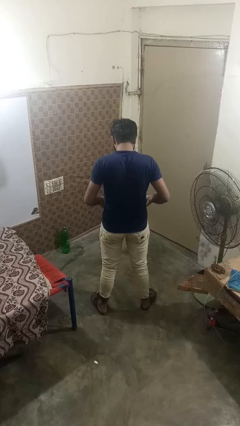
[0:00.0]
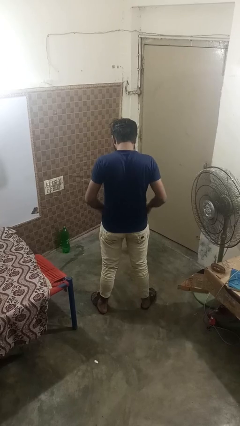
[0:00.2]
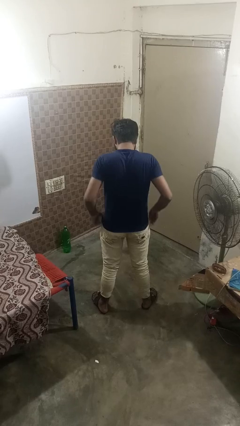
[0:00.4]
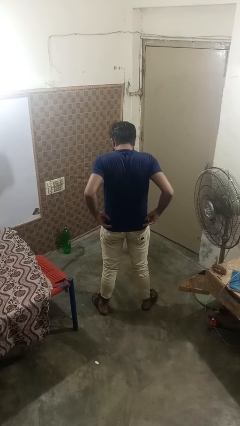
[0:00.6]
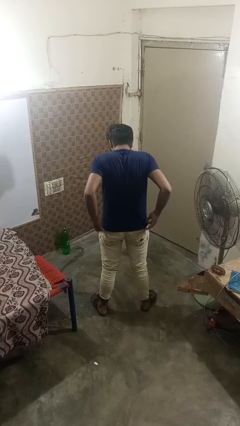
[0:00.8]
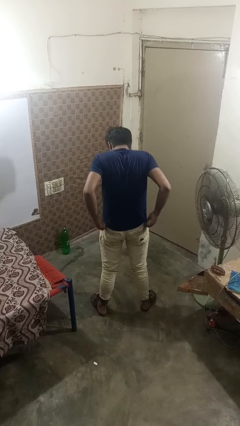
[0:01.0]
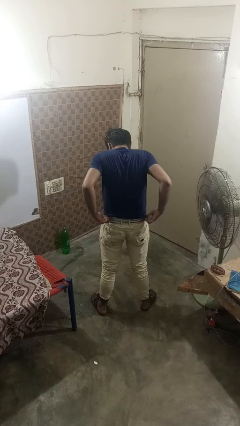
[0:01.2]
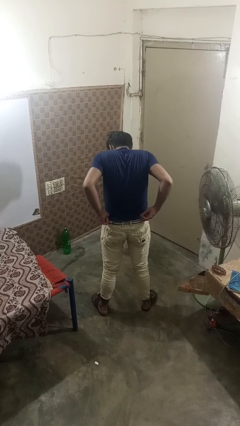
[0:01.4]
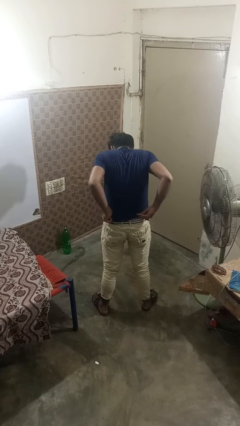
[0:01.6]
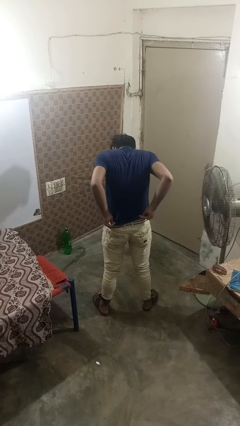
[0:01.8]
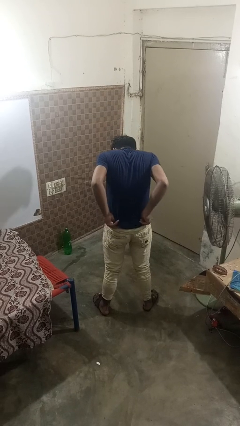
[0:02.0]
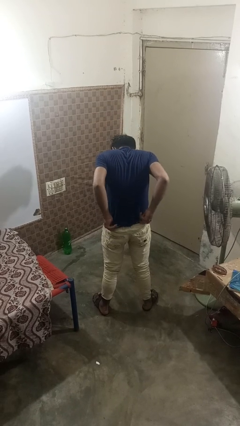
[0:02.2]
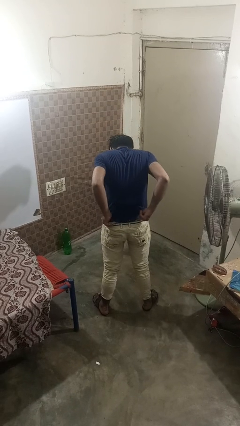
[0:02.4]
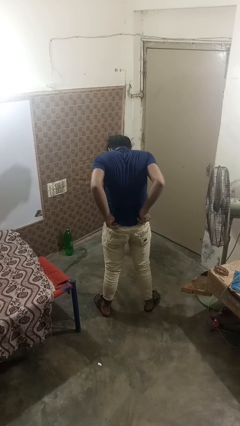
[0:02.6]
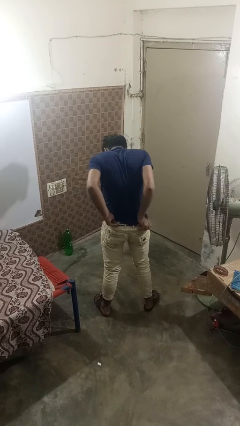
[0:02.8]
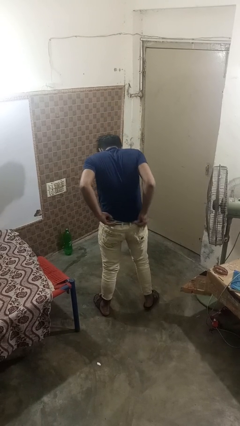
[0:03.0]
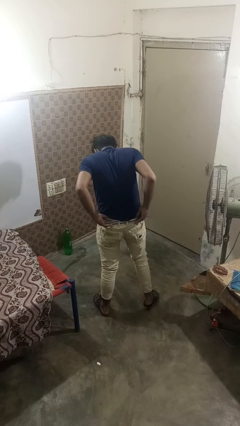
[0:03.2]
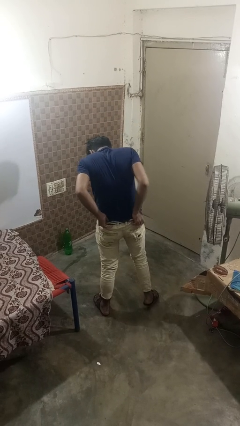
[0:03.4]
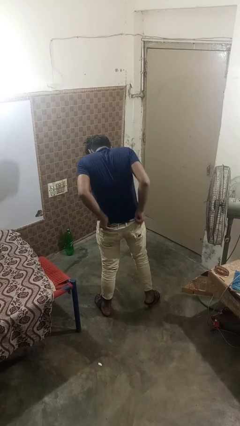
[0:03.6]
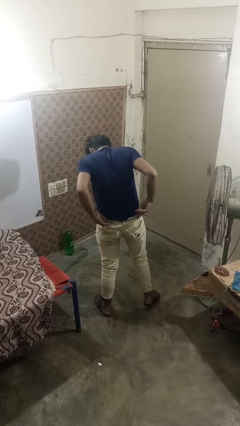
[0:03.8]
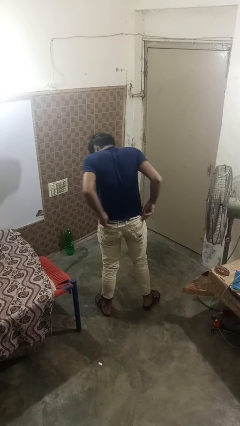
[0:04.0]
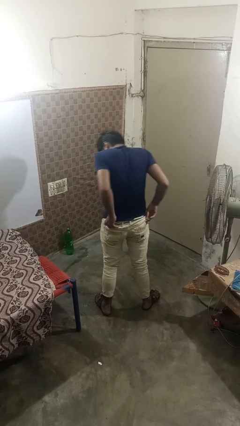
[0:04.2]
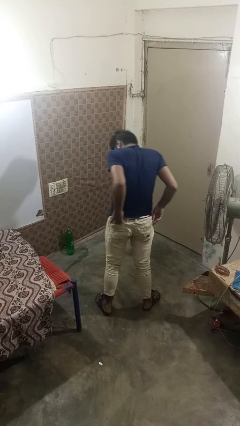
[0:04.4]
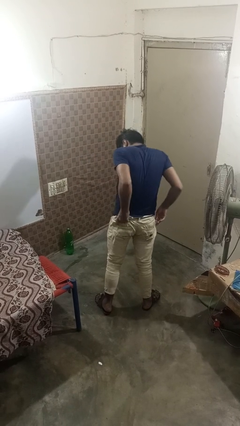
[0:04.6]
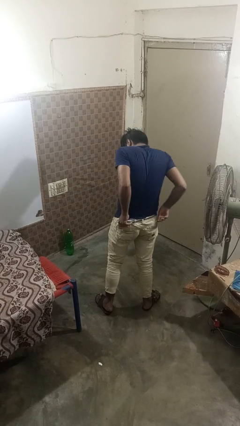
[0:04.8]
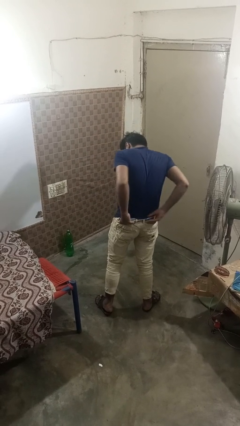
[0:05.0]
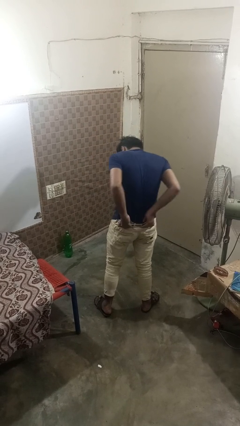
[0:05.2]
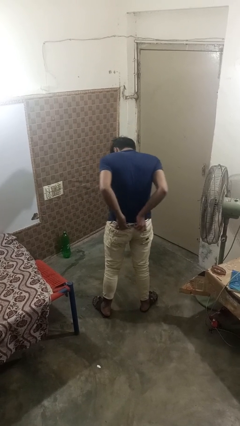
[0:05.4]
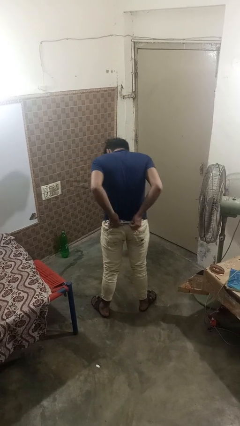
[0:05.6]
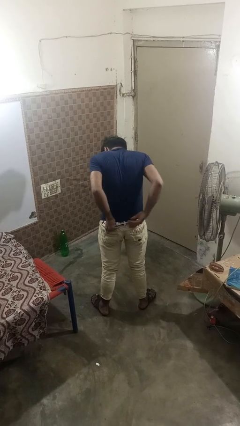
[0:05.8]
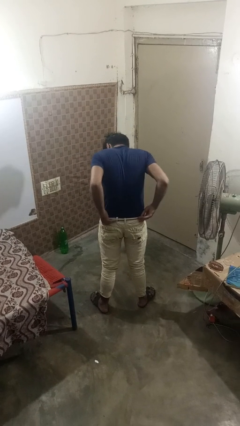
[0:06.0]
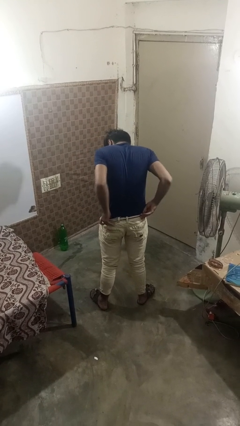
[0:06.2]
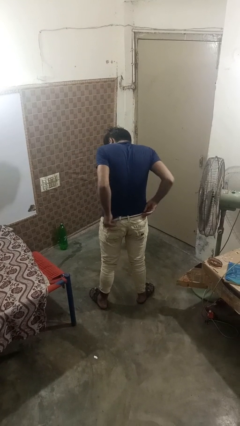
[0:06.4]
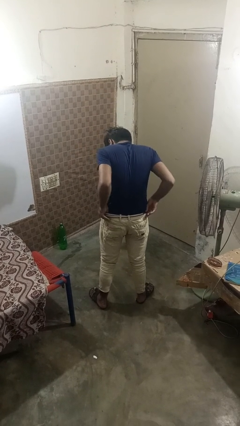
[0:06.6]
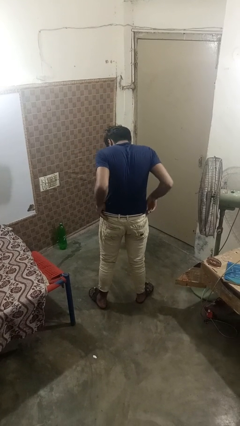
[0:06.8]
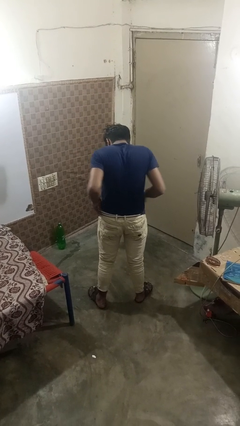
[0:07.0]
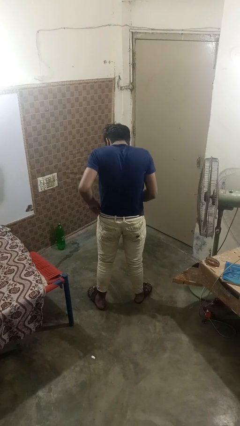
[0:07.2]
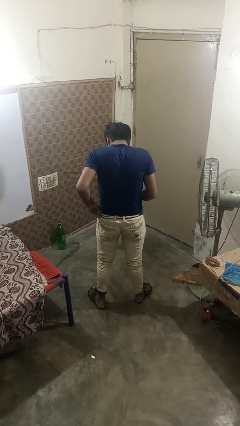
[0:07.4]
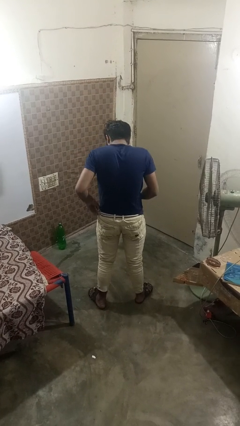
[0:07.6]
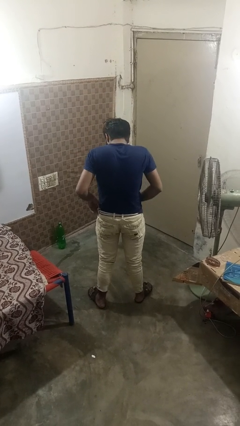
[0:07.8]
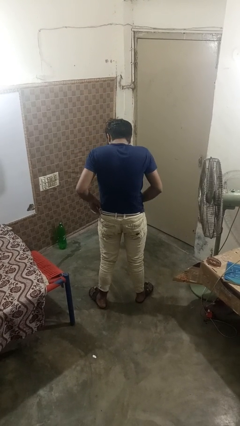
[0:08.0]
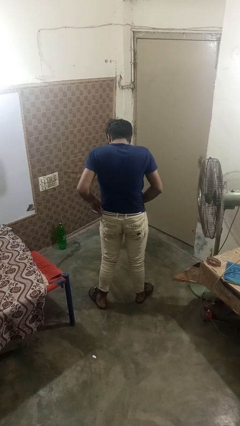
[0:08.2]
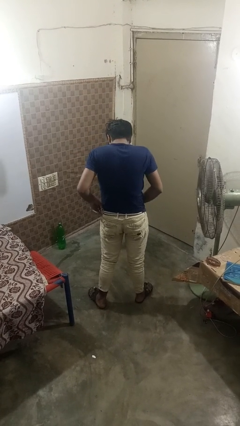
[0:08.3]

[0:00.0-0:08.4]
person tucks in shirt

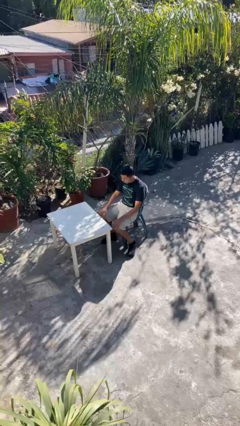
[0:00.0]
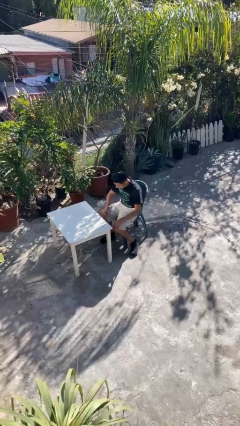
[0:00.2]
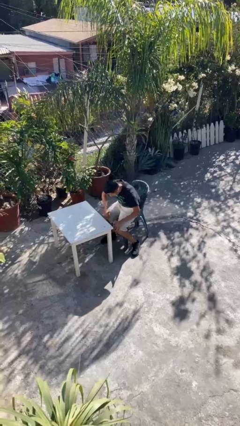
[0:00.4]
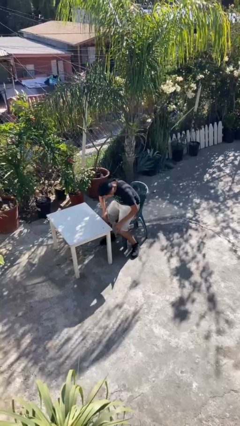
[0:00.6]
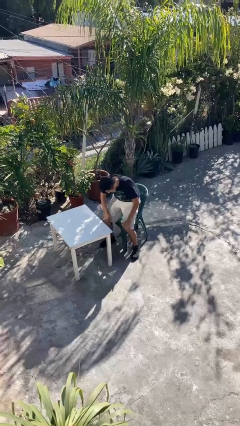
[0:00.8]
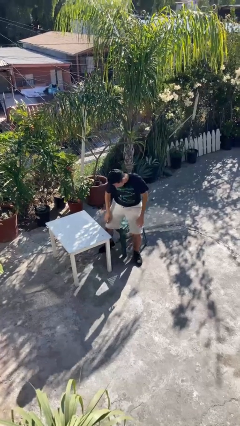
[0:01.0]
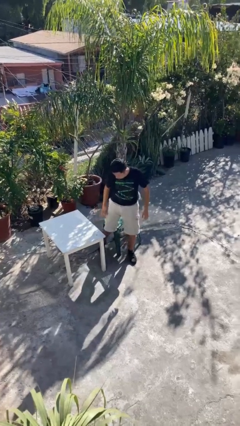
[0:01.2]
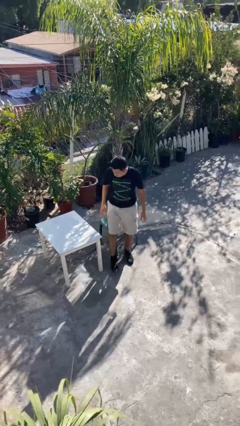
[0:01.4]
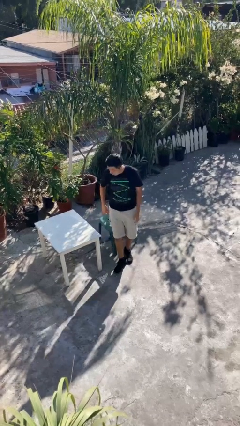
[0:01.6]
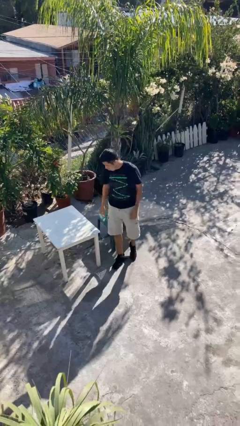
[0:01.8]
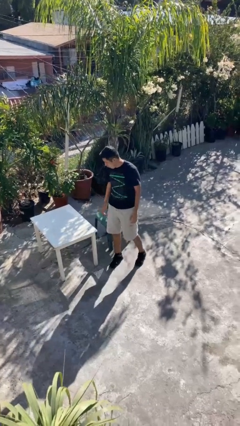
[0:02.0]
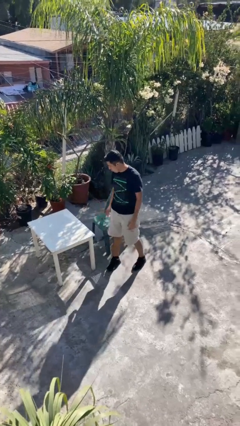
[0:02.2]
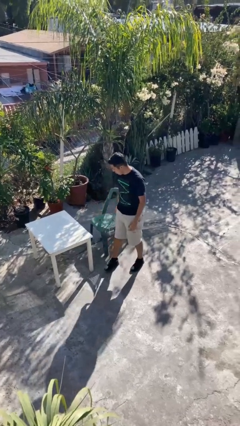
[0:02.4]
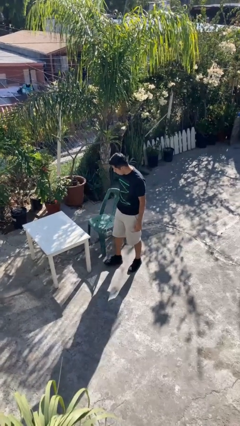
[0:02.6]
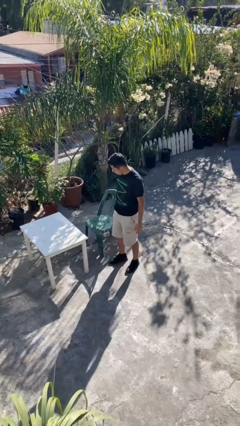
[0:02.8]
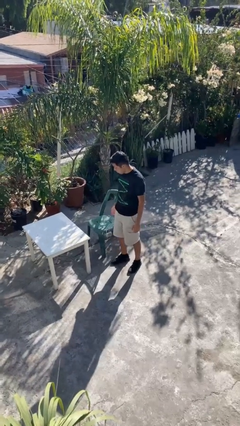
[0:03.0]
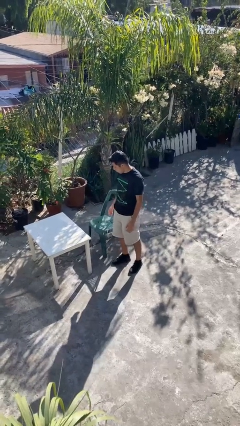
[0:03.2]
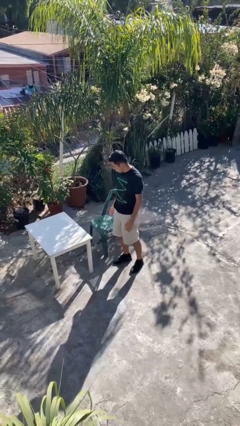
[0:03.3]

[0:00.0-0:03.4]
person stands up

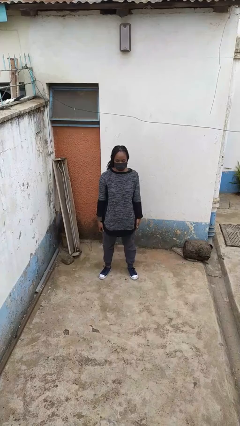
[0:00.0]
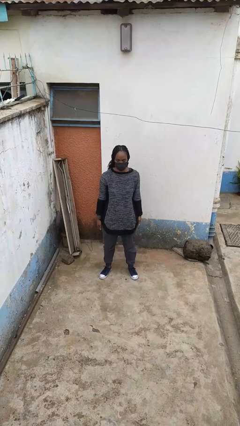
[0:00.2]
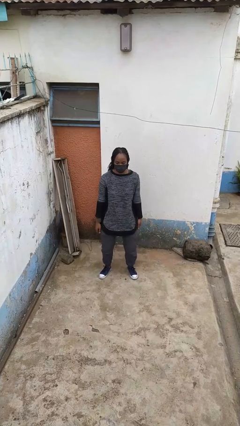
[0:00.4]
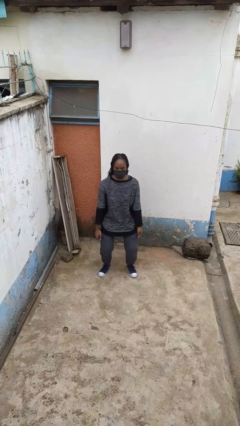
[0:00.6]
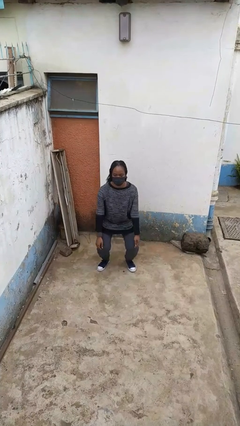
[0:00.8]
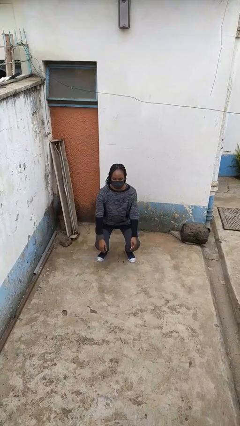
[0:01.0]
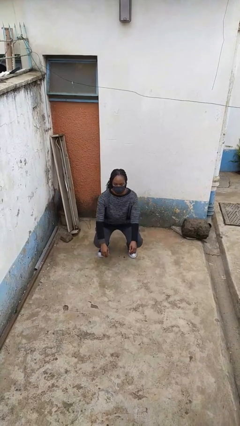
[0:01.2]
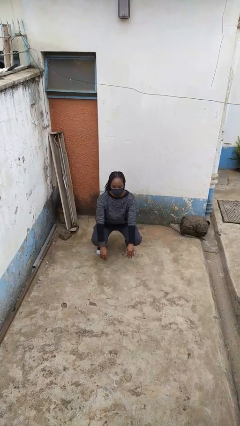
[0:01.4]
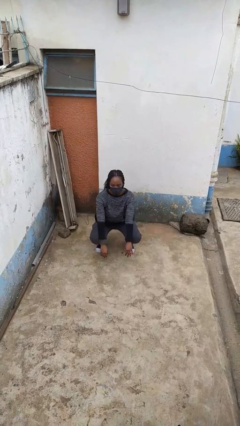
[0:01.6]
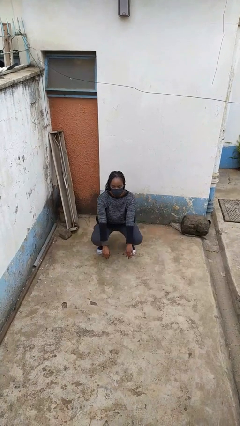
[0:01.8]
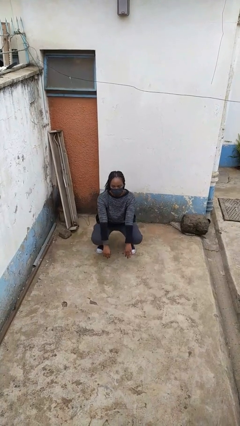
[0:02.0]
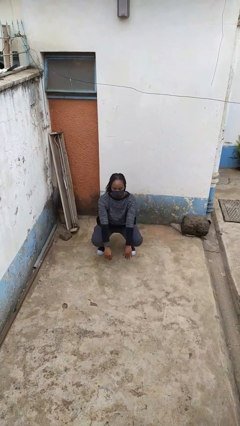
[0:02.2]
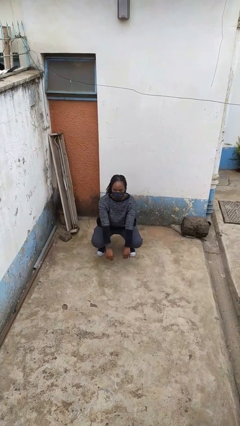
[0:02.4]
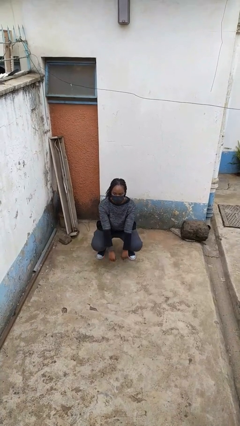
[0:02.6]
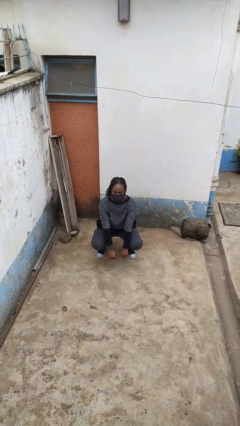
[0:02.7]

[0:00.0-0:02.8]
person squats

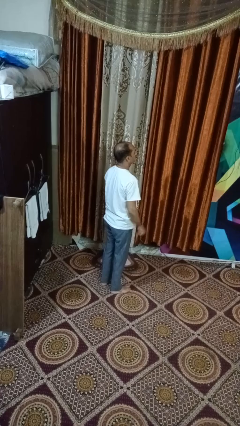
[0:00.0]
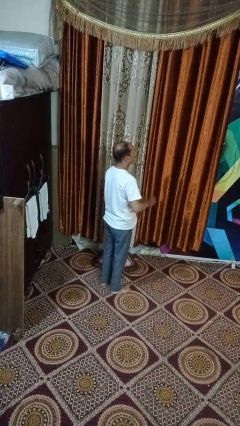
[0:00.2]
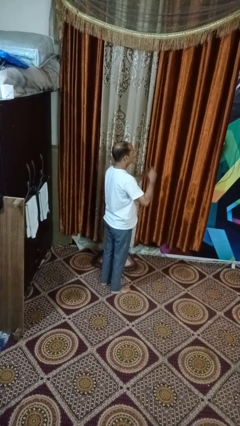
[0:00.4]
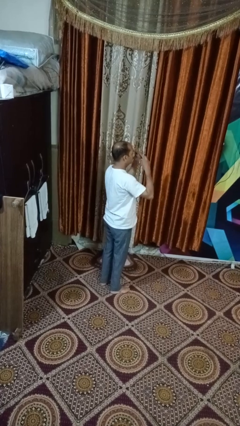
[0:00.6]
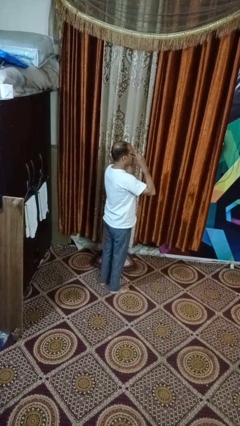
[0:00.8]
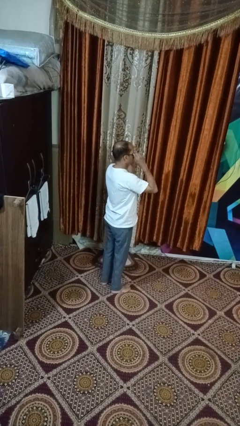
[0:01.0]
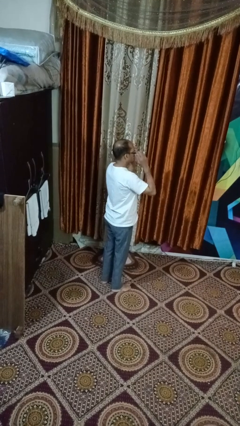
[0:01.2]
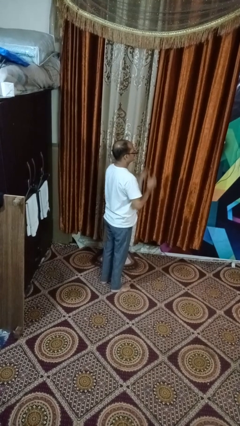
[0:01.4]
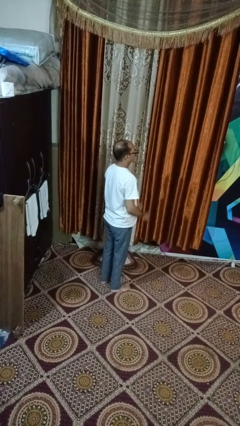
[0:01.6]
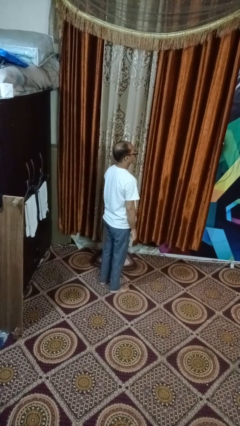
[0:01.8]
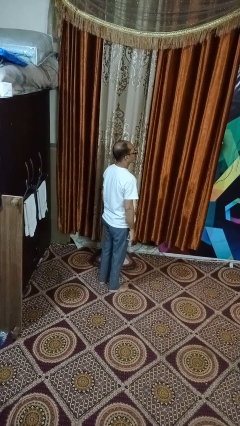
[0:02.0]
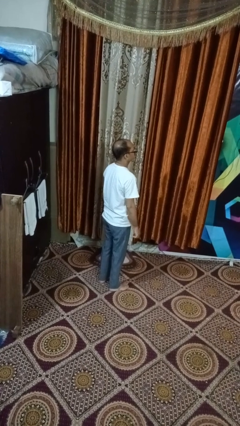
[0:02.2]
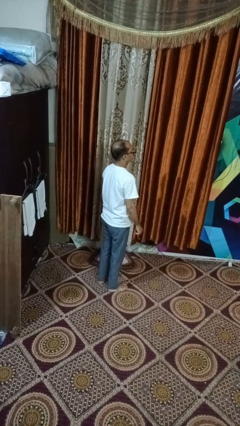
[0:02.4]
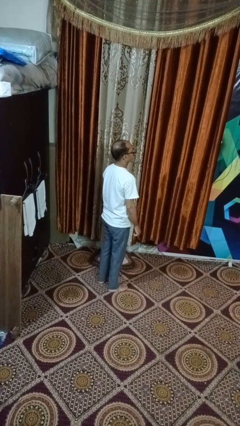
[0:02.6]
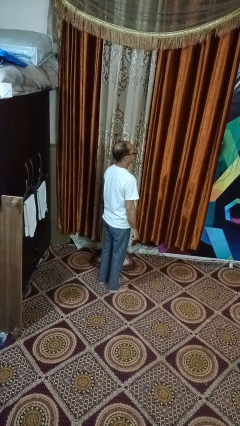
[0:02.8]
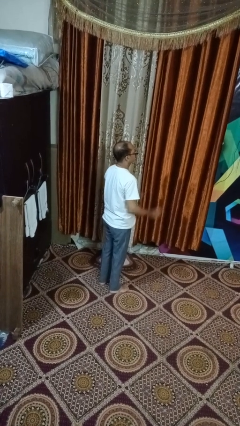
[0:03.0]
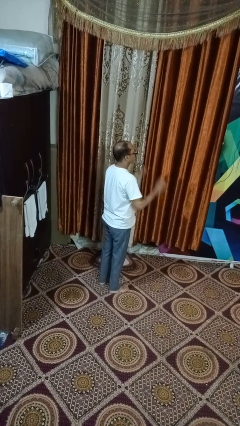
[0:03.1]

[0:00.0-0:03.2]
person puts on glasses

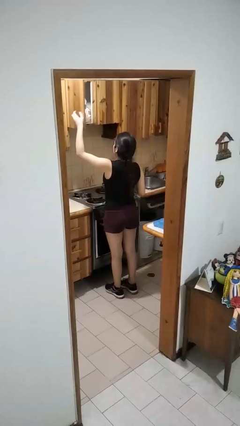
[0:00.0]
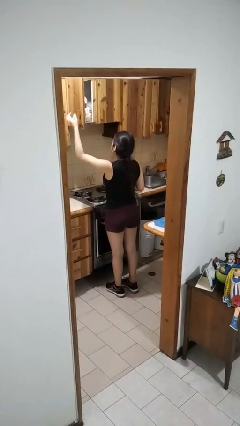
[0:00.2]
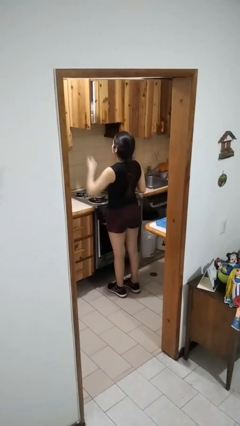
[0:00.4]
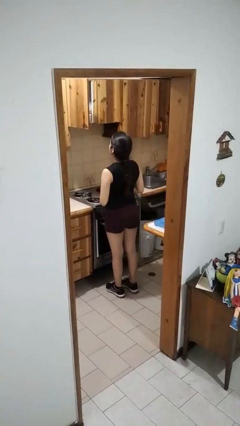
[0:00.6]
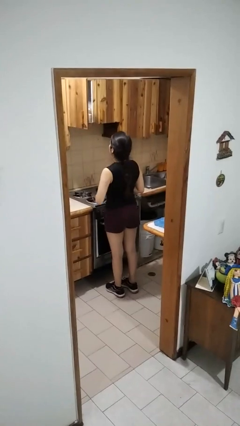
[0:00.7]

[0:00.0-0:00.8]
person opens cabinet
